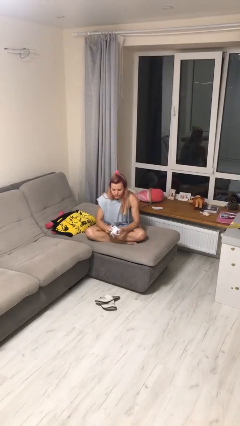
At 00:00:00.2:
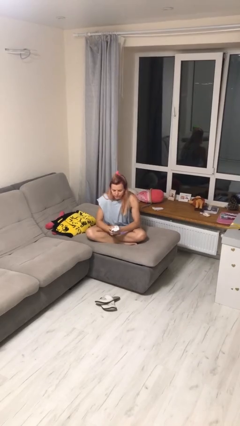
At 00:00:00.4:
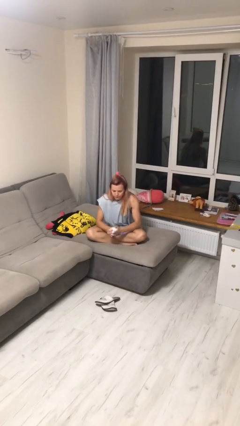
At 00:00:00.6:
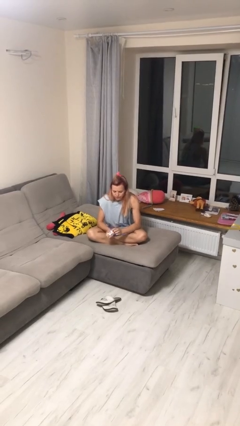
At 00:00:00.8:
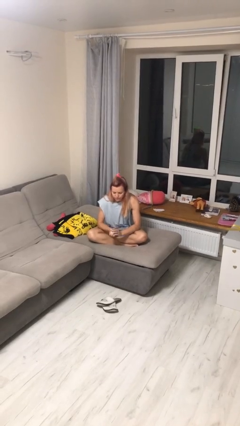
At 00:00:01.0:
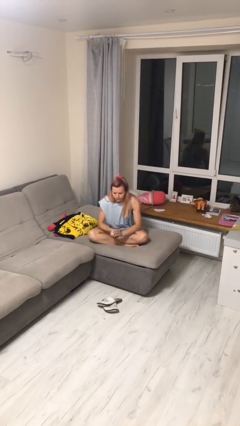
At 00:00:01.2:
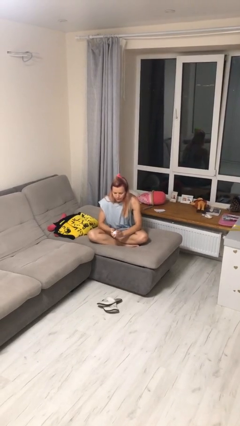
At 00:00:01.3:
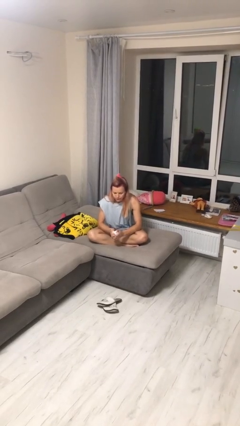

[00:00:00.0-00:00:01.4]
person crumples paper

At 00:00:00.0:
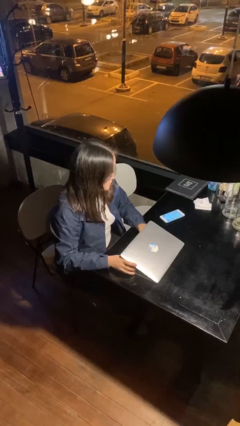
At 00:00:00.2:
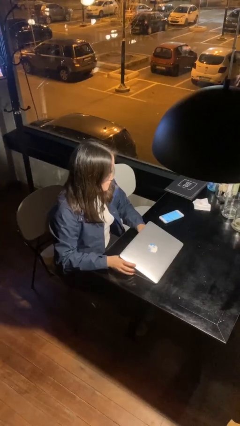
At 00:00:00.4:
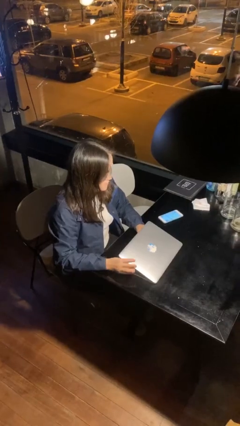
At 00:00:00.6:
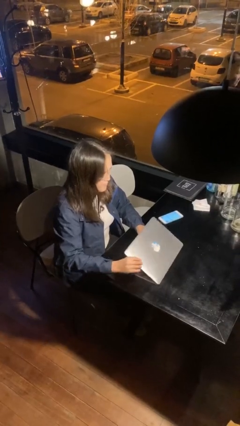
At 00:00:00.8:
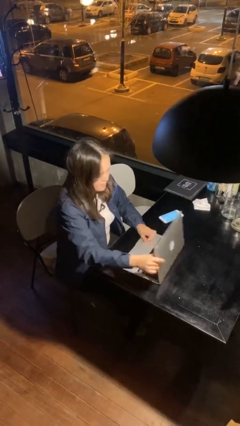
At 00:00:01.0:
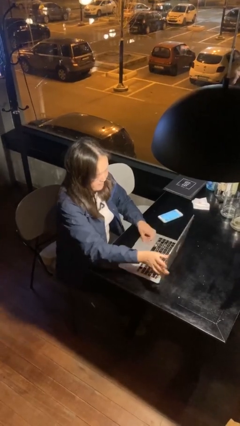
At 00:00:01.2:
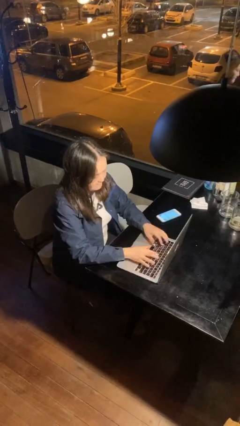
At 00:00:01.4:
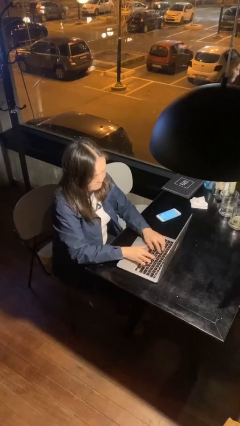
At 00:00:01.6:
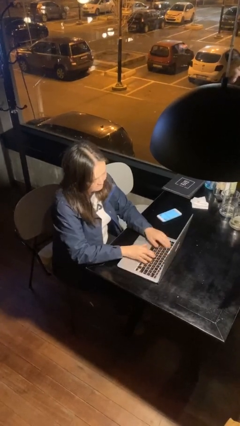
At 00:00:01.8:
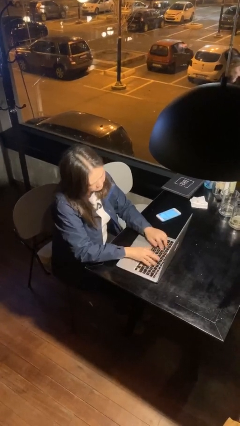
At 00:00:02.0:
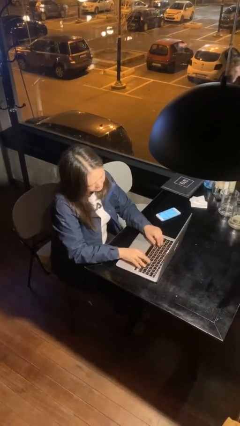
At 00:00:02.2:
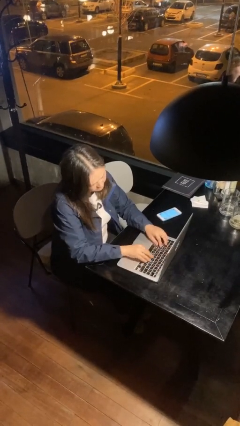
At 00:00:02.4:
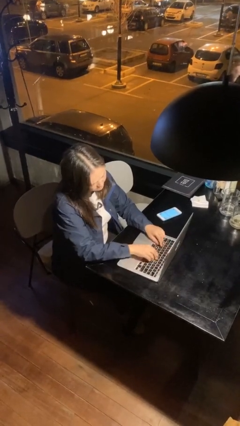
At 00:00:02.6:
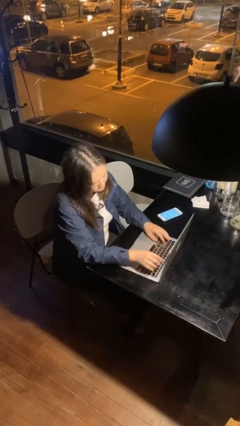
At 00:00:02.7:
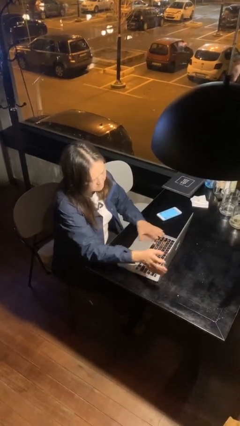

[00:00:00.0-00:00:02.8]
person interacts with laptop

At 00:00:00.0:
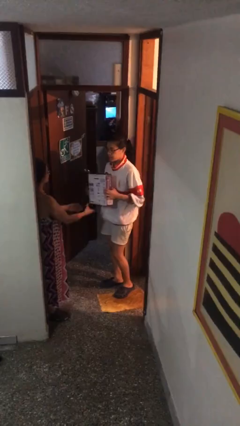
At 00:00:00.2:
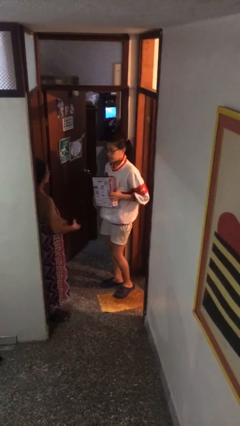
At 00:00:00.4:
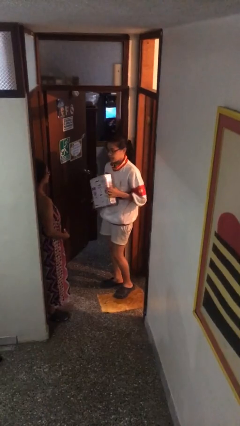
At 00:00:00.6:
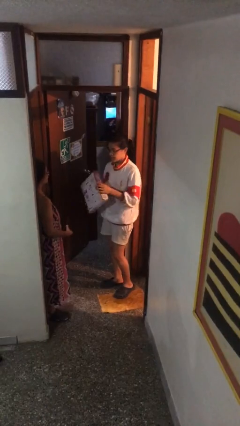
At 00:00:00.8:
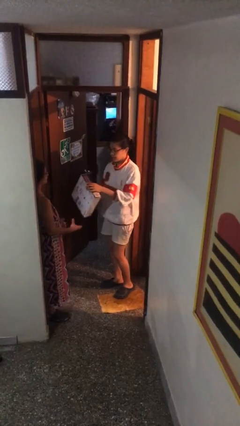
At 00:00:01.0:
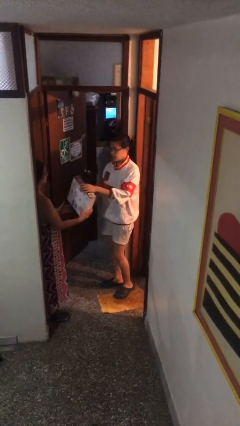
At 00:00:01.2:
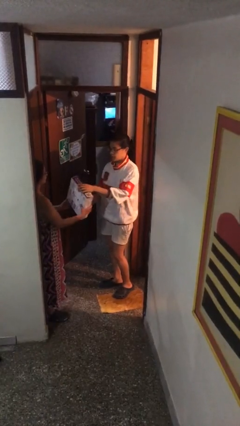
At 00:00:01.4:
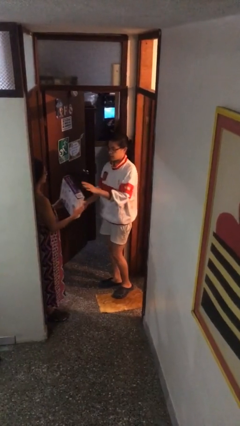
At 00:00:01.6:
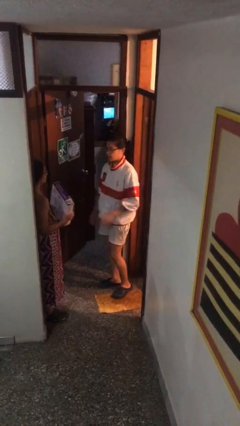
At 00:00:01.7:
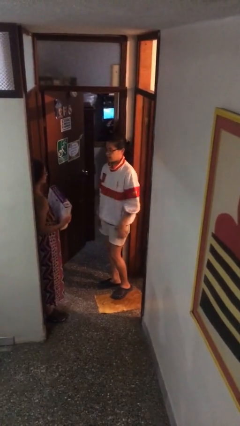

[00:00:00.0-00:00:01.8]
person transfers object to person

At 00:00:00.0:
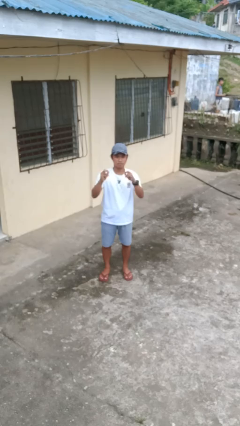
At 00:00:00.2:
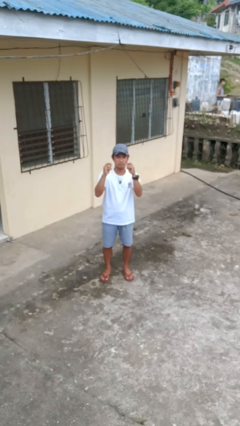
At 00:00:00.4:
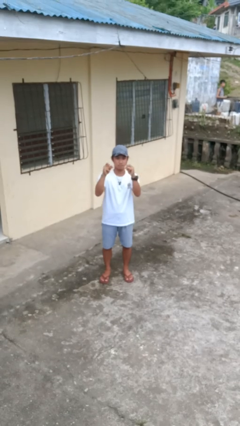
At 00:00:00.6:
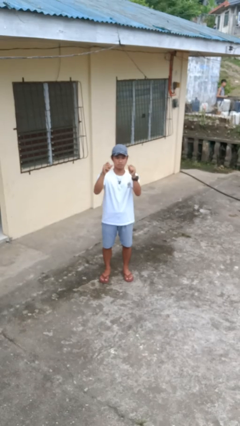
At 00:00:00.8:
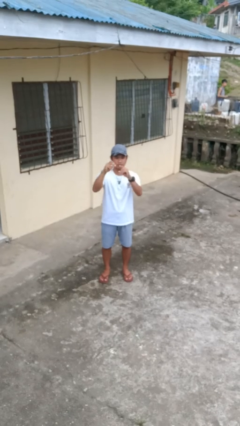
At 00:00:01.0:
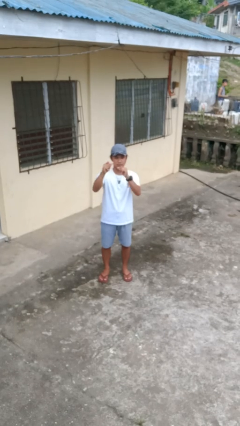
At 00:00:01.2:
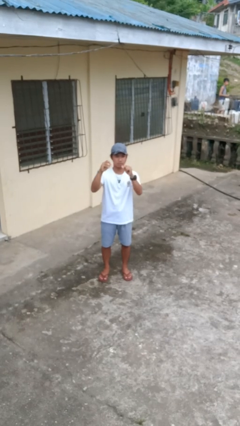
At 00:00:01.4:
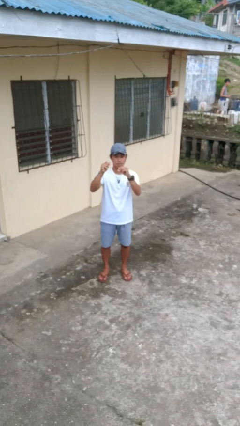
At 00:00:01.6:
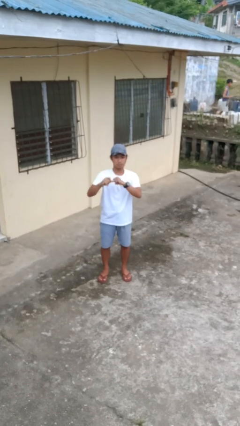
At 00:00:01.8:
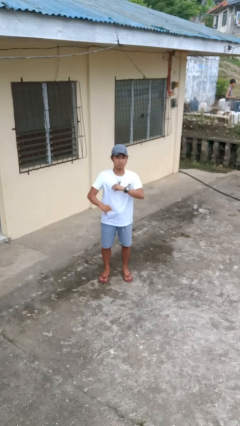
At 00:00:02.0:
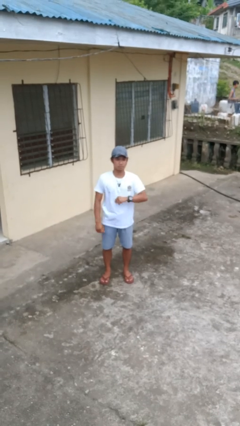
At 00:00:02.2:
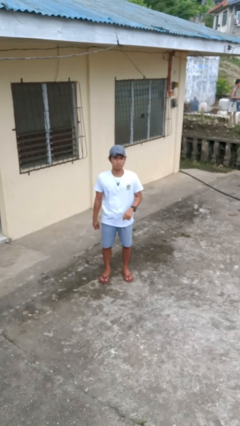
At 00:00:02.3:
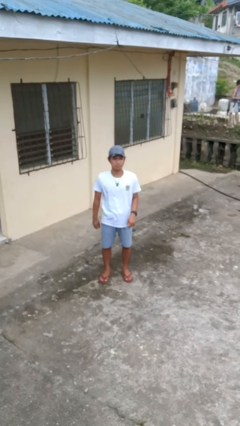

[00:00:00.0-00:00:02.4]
person snaps fingers

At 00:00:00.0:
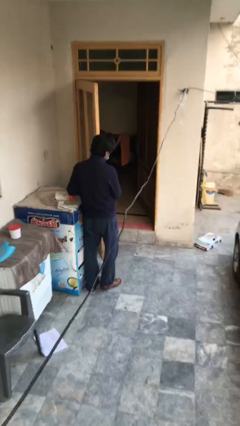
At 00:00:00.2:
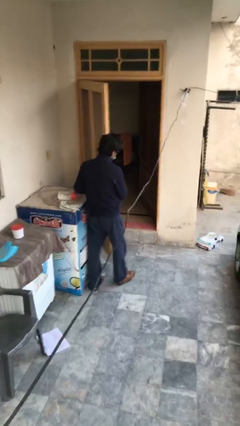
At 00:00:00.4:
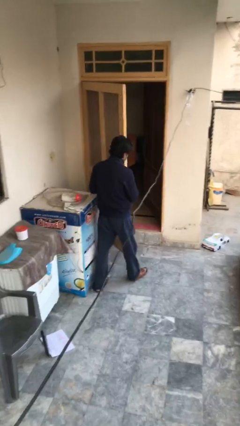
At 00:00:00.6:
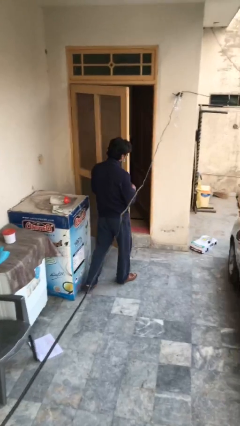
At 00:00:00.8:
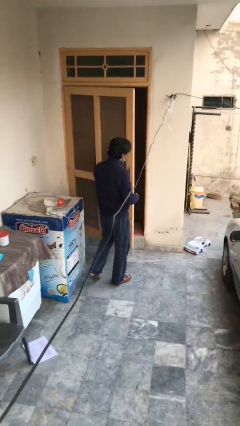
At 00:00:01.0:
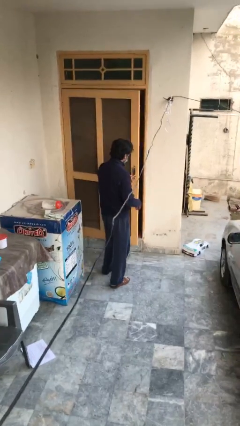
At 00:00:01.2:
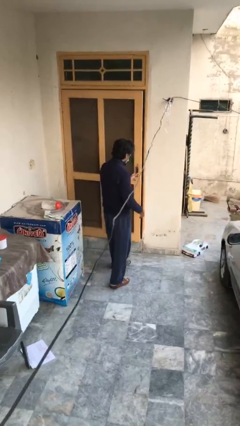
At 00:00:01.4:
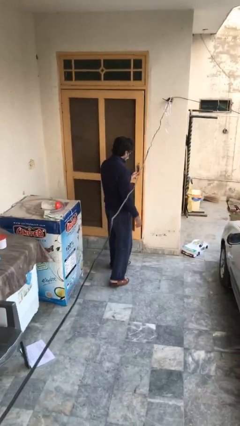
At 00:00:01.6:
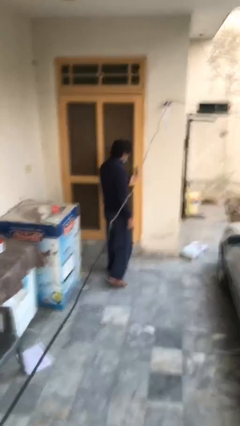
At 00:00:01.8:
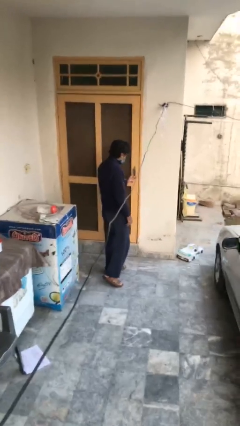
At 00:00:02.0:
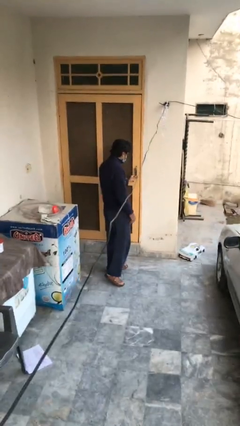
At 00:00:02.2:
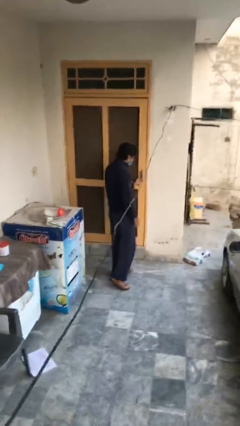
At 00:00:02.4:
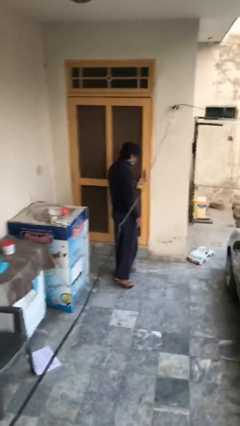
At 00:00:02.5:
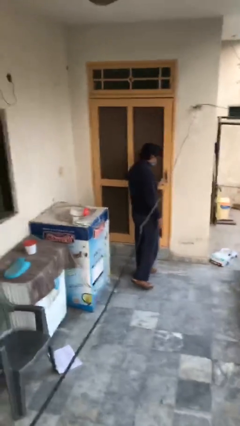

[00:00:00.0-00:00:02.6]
person closes facility door

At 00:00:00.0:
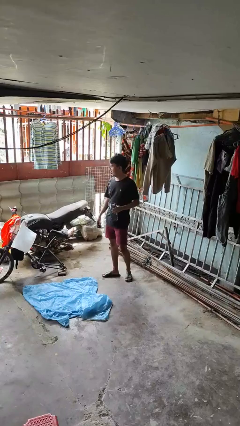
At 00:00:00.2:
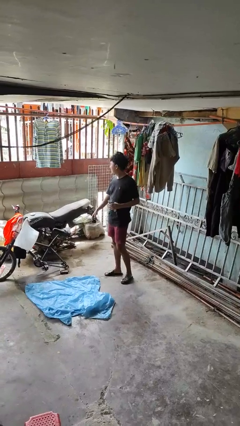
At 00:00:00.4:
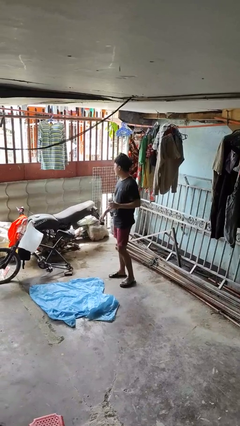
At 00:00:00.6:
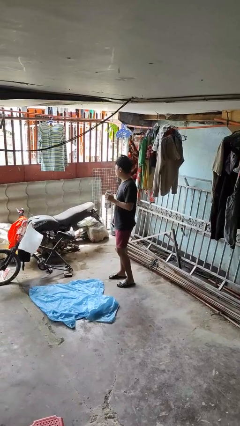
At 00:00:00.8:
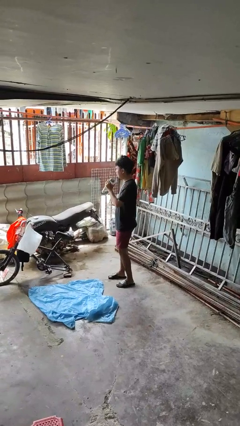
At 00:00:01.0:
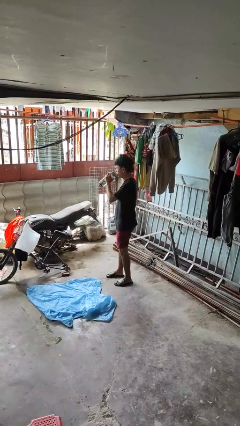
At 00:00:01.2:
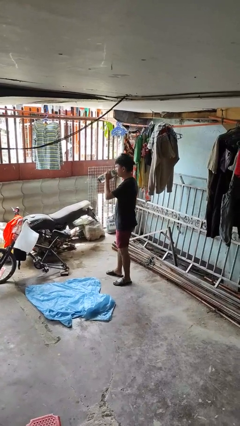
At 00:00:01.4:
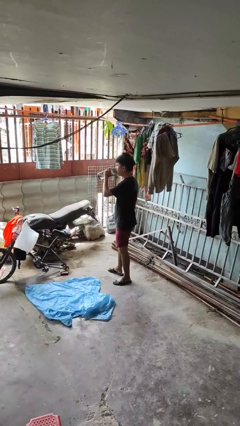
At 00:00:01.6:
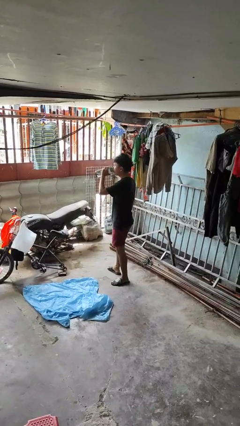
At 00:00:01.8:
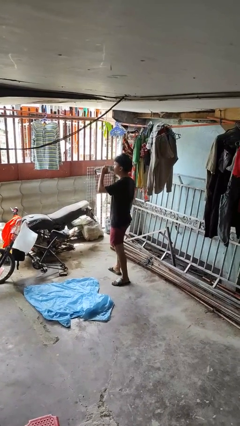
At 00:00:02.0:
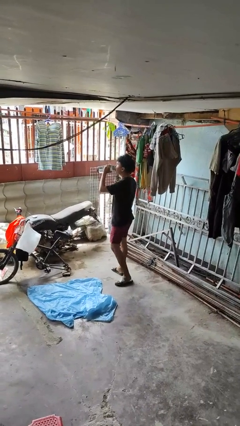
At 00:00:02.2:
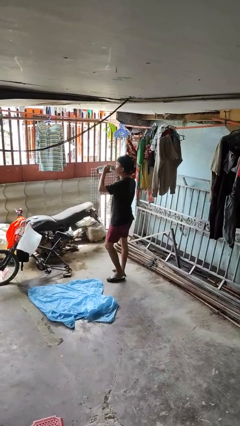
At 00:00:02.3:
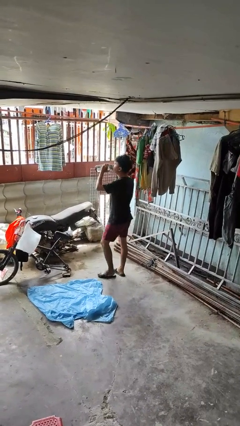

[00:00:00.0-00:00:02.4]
person drinks from bottle

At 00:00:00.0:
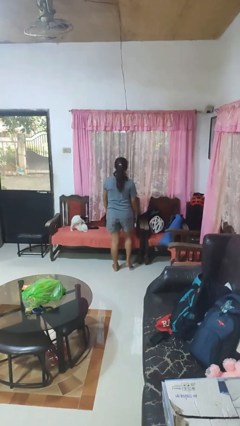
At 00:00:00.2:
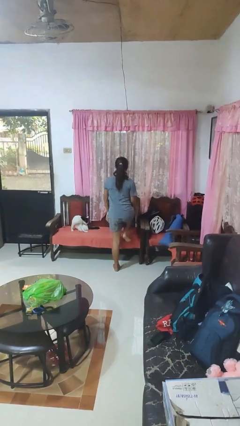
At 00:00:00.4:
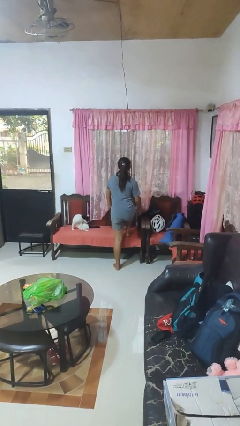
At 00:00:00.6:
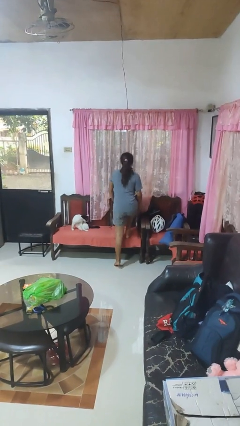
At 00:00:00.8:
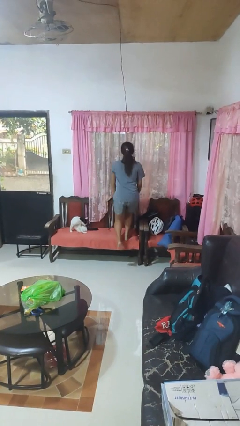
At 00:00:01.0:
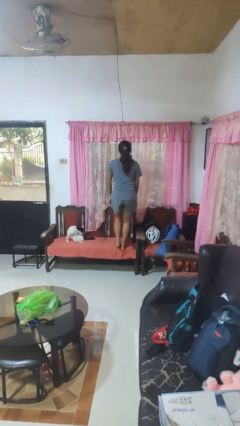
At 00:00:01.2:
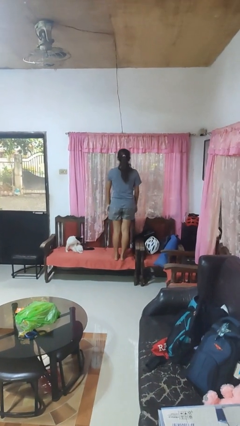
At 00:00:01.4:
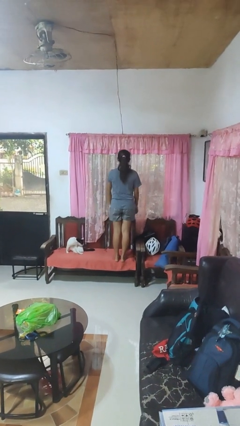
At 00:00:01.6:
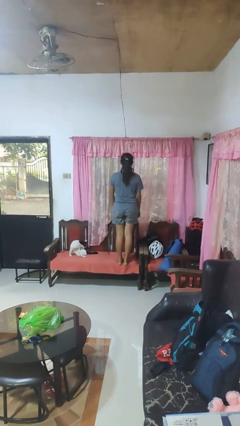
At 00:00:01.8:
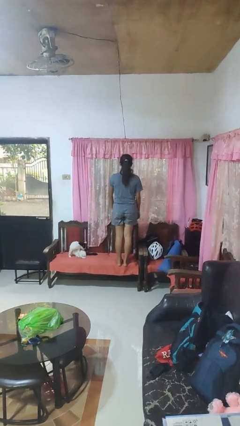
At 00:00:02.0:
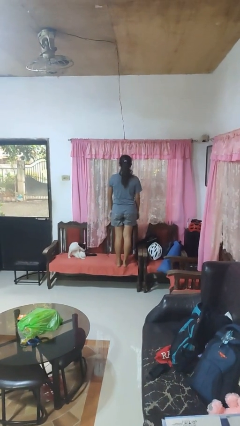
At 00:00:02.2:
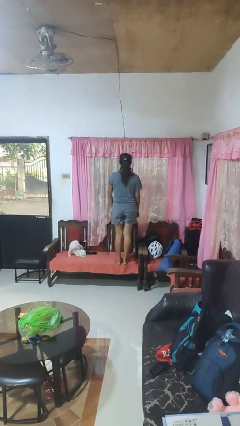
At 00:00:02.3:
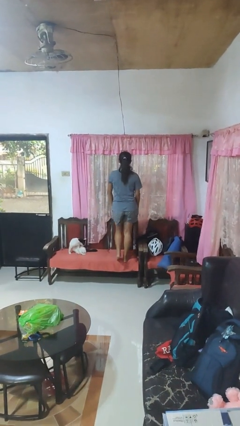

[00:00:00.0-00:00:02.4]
person climbs on chair

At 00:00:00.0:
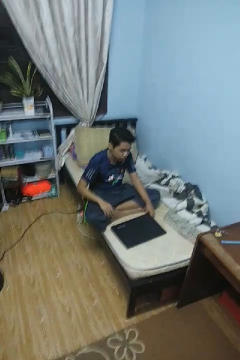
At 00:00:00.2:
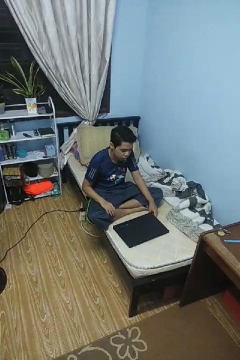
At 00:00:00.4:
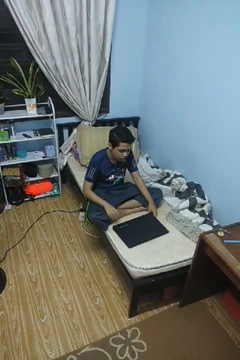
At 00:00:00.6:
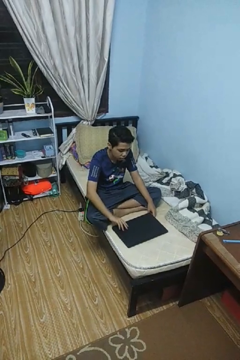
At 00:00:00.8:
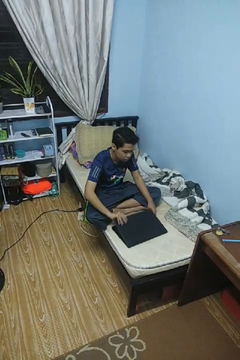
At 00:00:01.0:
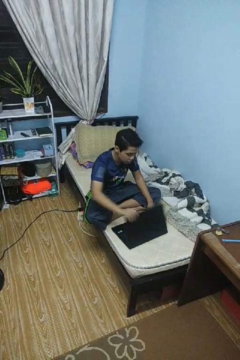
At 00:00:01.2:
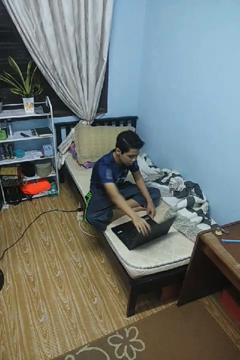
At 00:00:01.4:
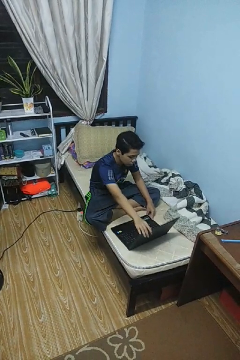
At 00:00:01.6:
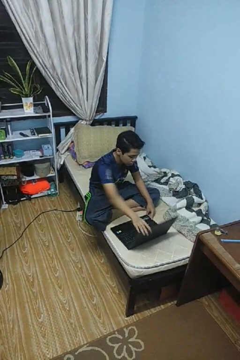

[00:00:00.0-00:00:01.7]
person opens laptop
